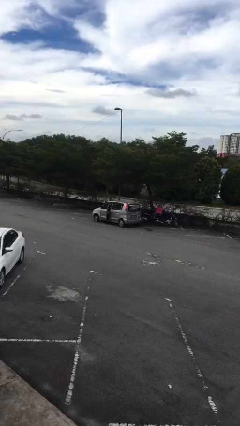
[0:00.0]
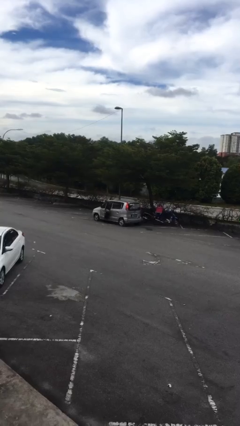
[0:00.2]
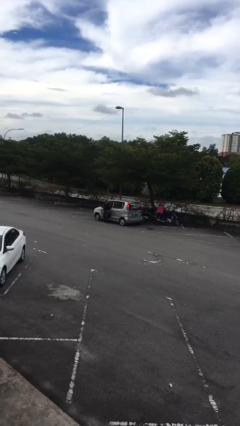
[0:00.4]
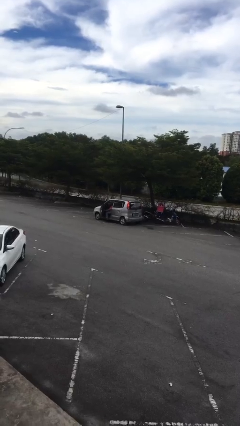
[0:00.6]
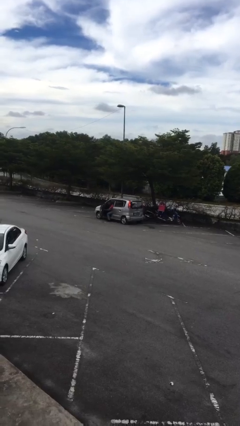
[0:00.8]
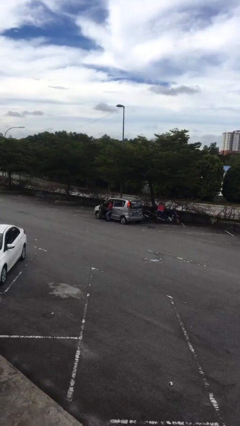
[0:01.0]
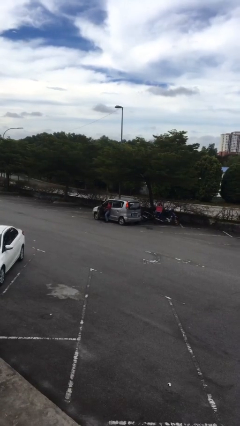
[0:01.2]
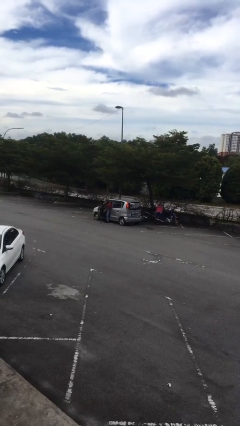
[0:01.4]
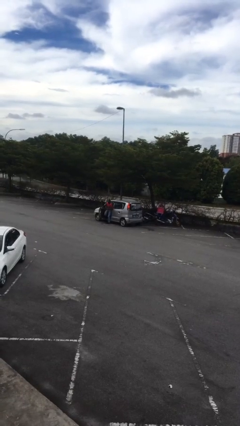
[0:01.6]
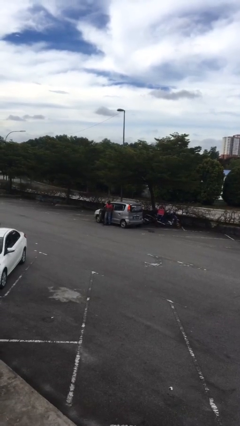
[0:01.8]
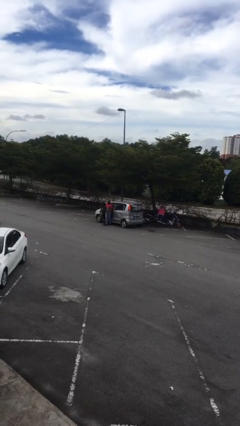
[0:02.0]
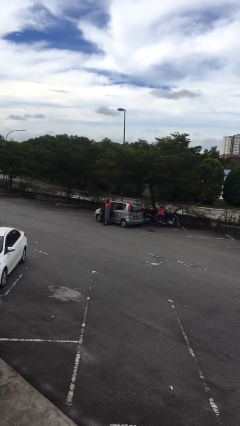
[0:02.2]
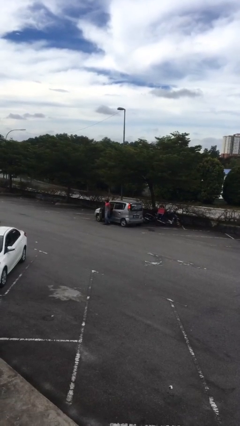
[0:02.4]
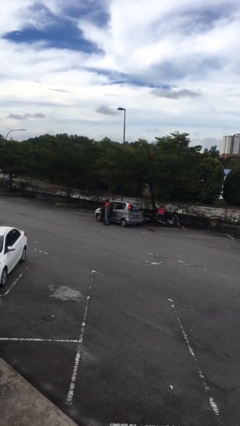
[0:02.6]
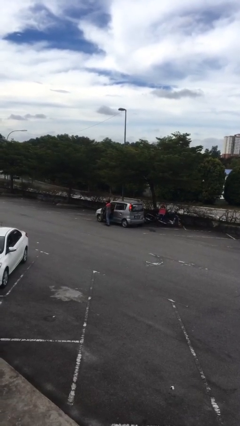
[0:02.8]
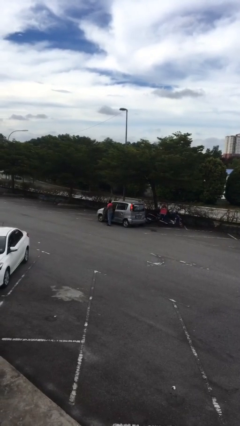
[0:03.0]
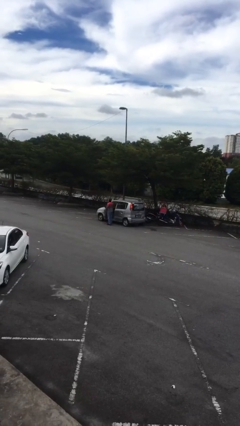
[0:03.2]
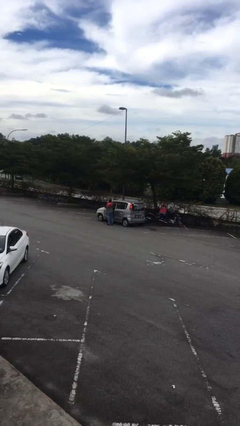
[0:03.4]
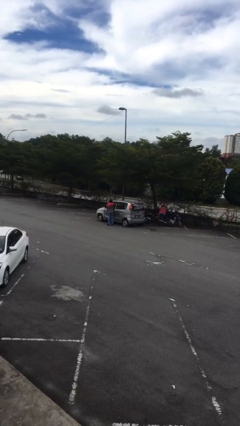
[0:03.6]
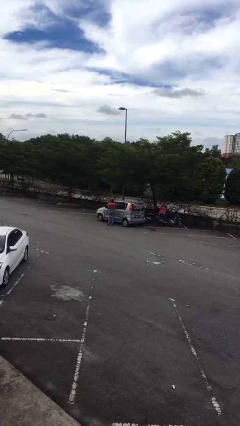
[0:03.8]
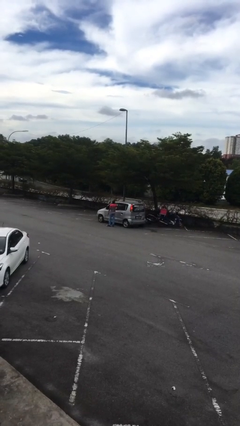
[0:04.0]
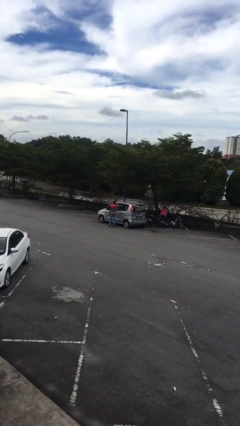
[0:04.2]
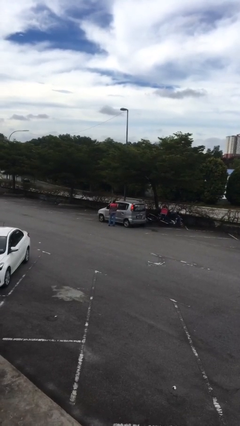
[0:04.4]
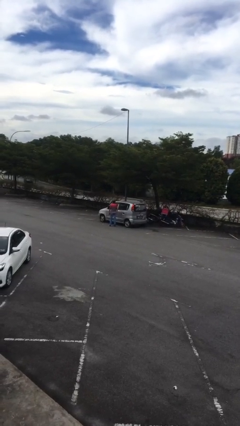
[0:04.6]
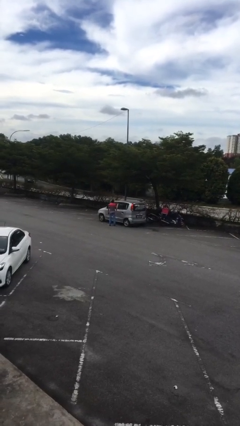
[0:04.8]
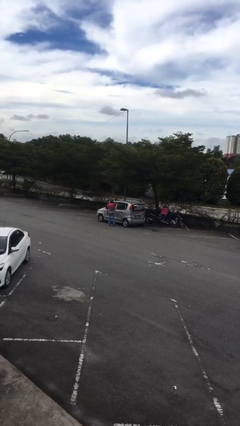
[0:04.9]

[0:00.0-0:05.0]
car drops off person

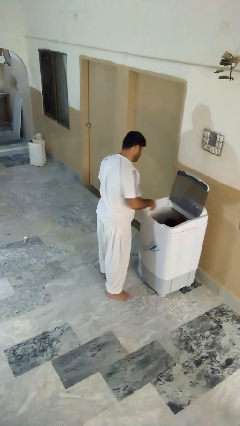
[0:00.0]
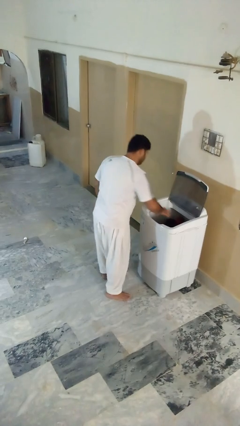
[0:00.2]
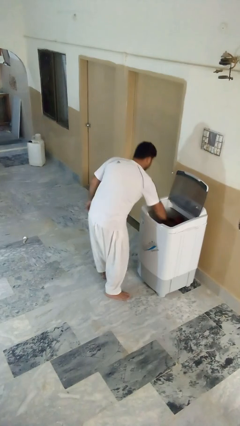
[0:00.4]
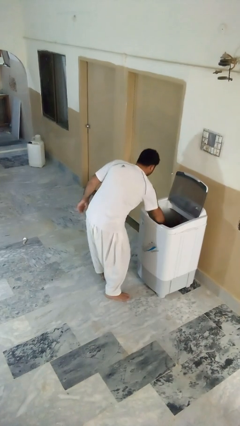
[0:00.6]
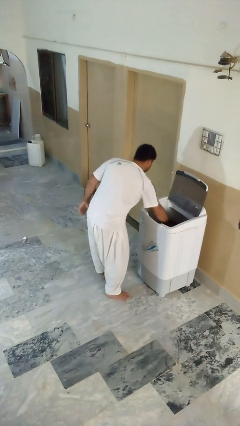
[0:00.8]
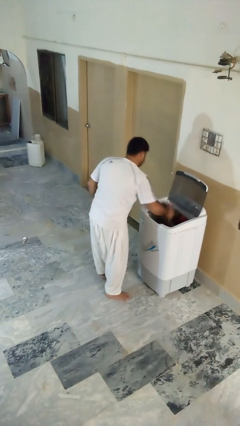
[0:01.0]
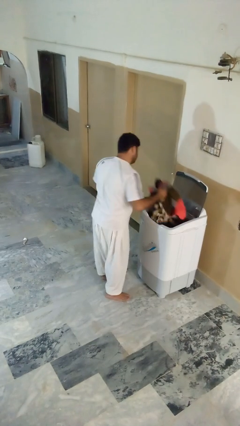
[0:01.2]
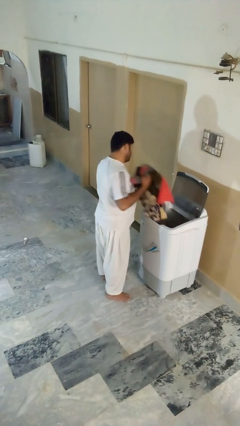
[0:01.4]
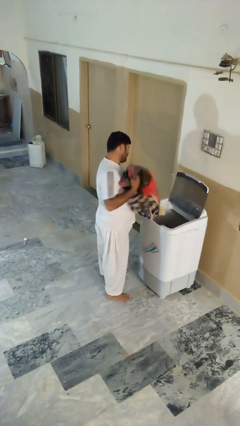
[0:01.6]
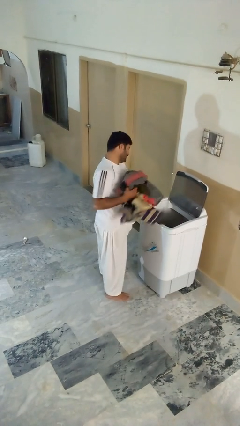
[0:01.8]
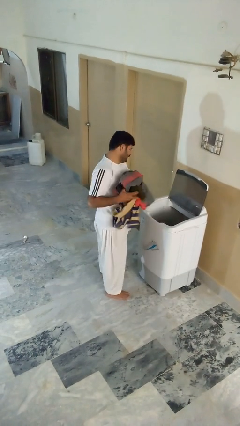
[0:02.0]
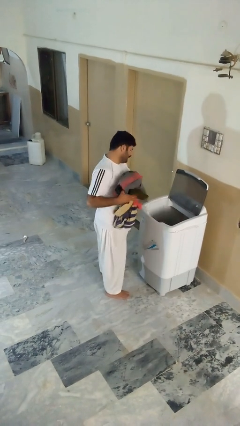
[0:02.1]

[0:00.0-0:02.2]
person unloads clotheswasher

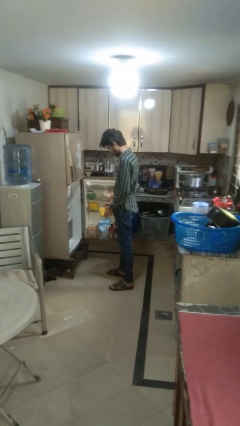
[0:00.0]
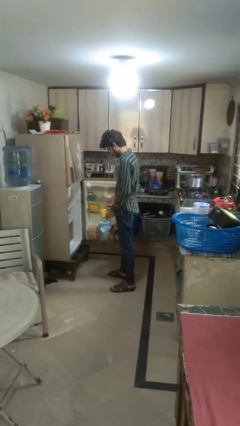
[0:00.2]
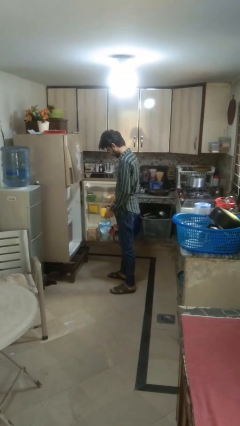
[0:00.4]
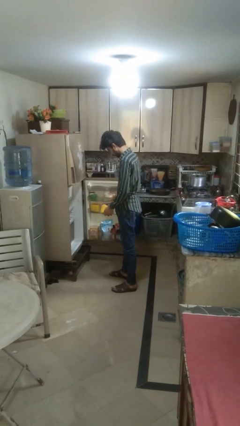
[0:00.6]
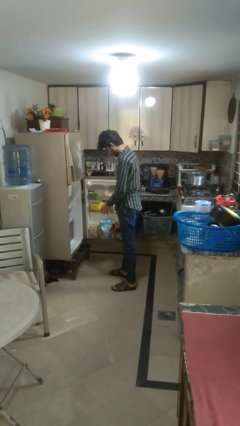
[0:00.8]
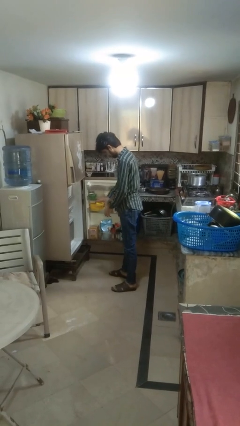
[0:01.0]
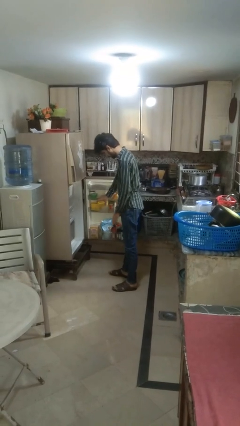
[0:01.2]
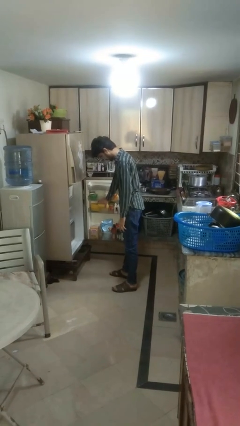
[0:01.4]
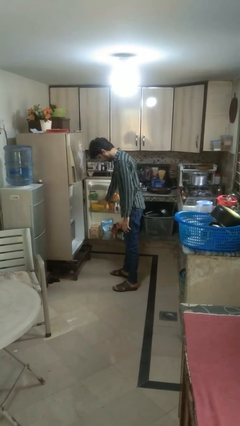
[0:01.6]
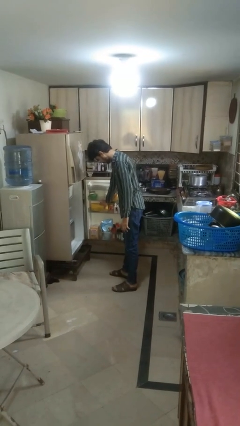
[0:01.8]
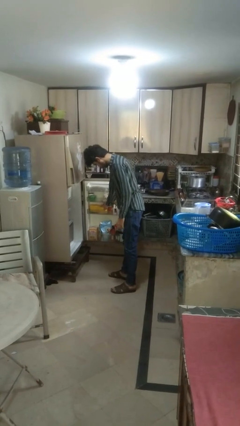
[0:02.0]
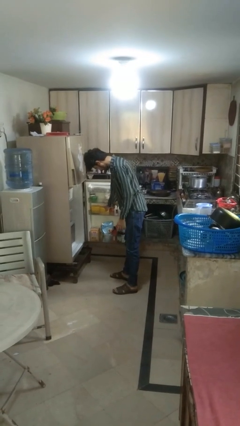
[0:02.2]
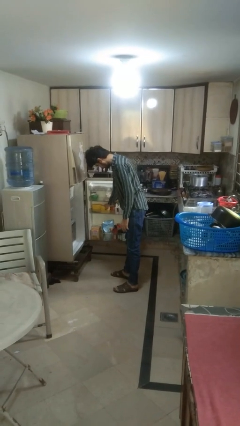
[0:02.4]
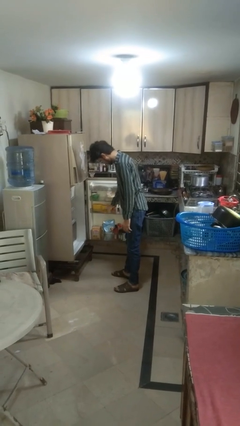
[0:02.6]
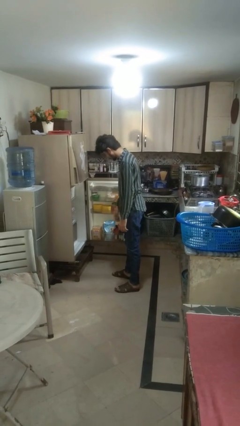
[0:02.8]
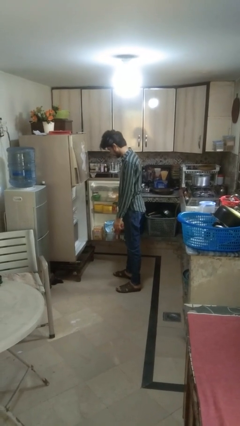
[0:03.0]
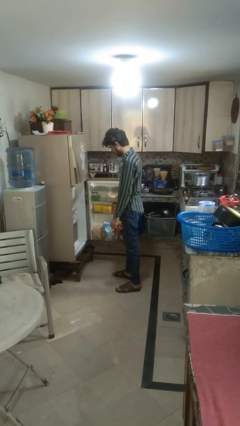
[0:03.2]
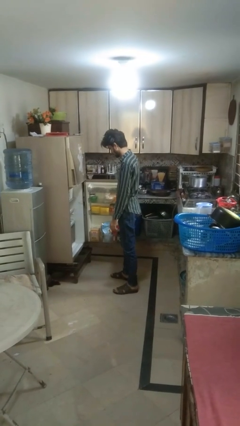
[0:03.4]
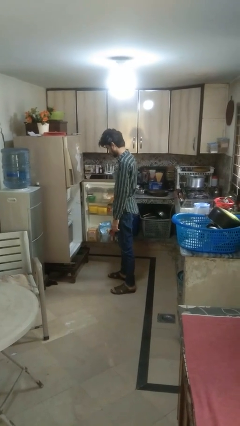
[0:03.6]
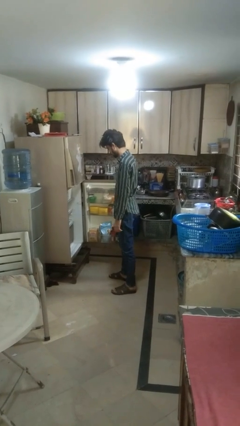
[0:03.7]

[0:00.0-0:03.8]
person puts object into refrigerator

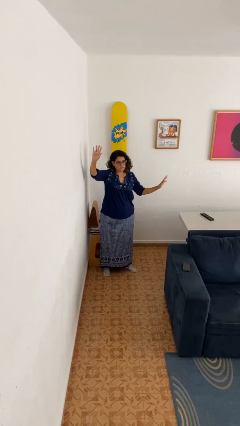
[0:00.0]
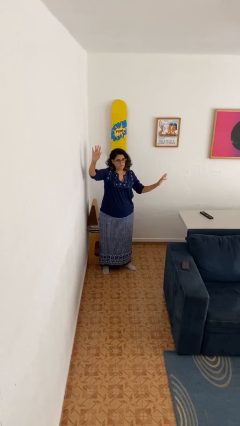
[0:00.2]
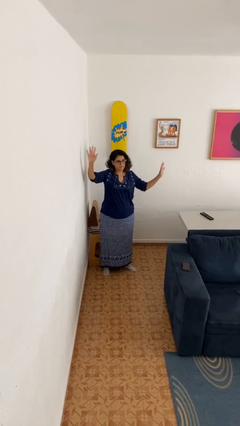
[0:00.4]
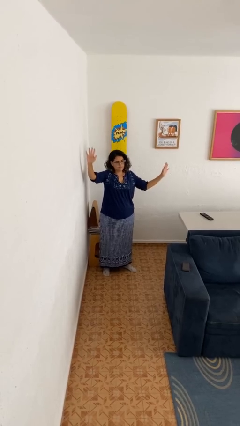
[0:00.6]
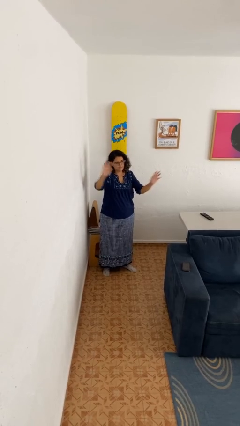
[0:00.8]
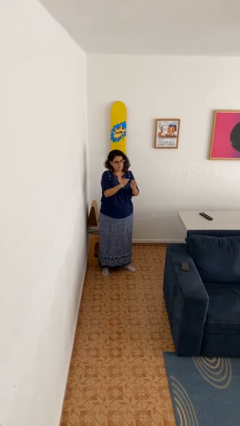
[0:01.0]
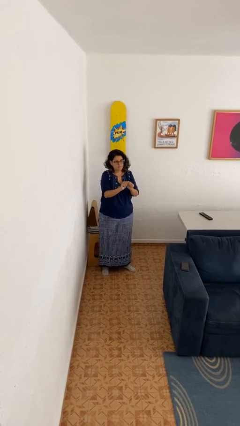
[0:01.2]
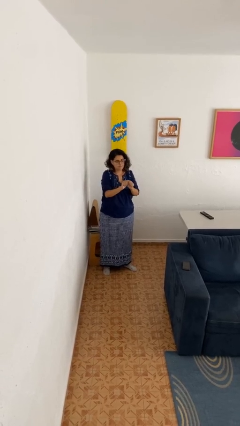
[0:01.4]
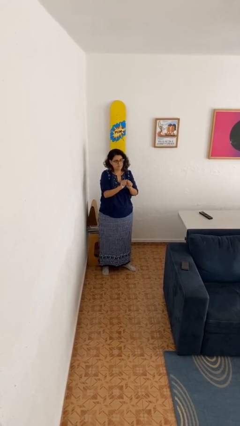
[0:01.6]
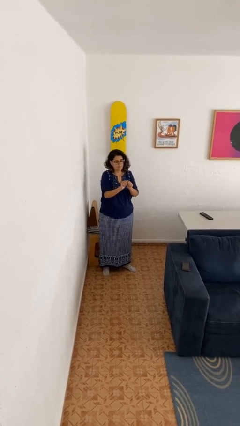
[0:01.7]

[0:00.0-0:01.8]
person gestures zoom out

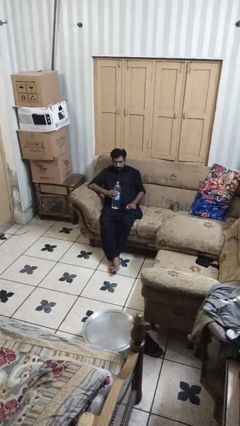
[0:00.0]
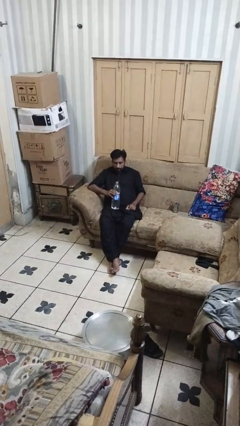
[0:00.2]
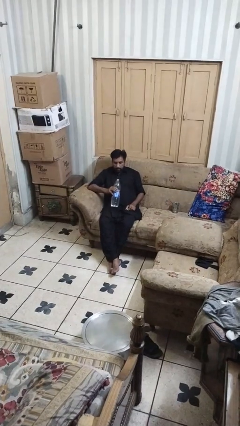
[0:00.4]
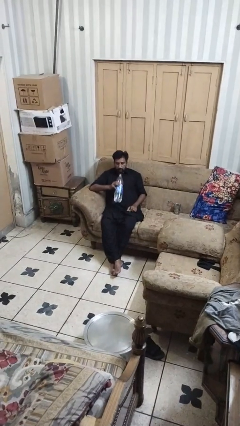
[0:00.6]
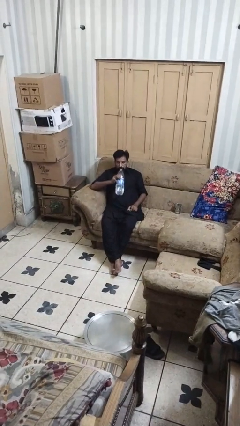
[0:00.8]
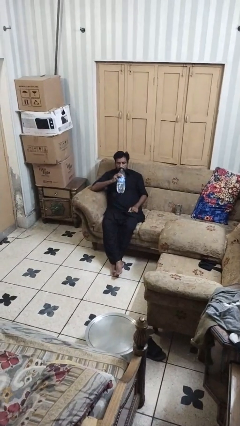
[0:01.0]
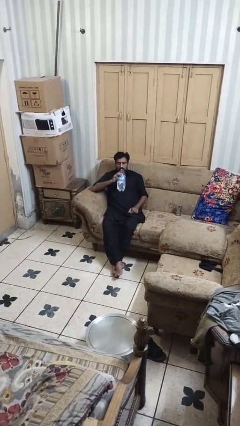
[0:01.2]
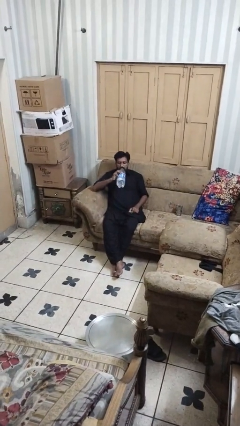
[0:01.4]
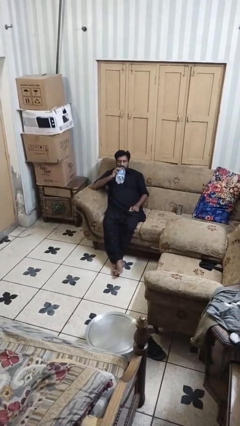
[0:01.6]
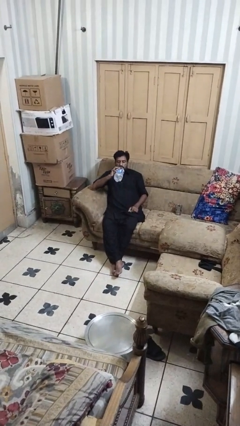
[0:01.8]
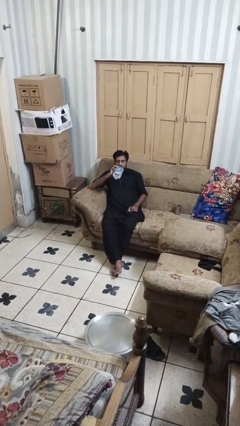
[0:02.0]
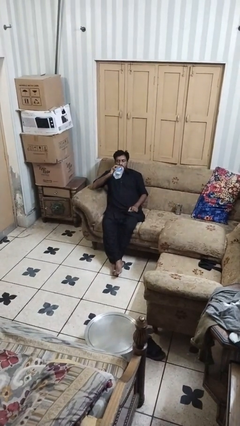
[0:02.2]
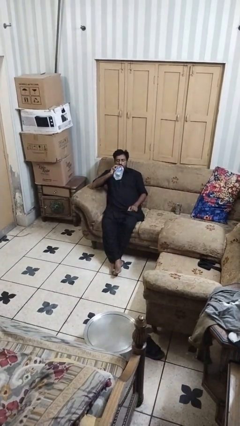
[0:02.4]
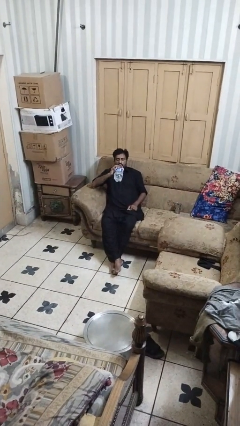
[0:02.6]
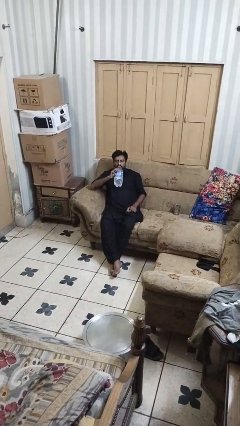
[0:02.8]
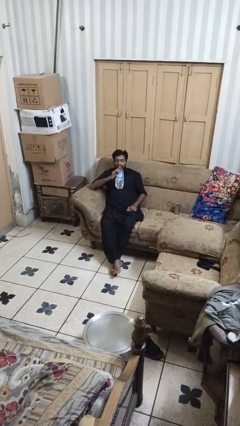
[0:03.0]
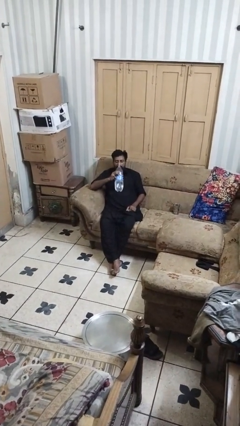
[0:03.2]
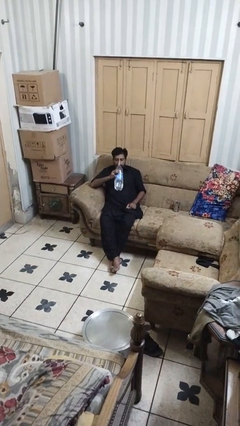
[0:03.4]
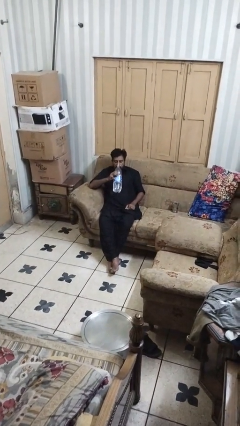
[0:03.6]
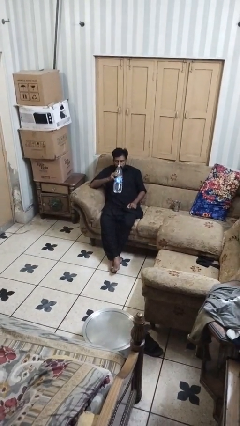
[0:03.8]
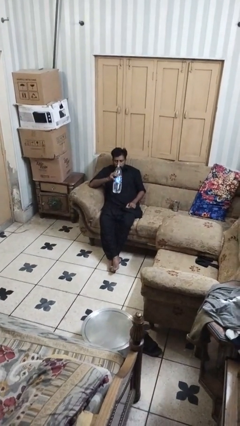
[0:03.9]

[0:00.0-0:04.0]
person drinks from bottle

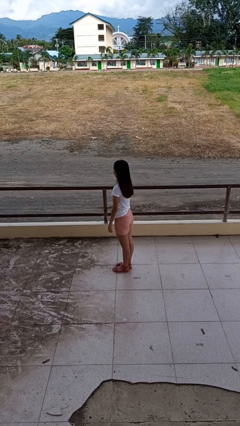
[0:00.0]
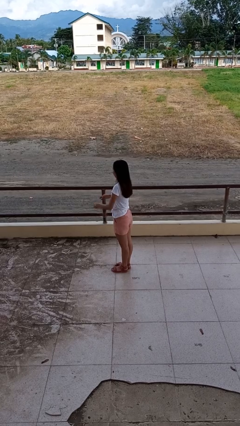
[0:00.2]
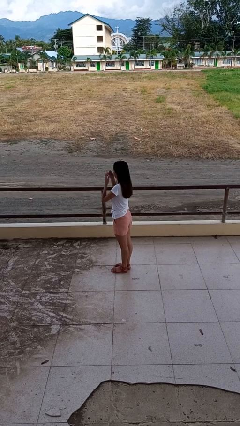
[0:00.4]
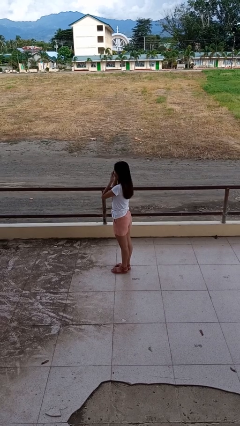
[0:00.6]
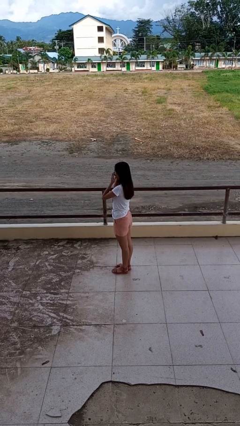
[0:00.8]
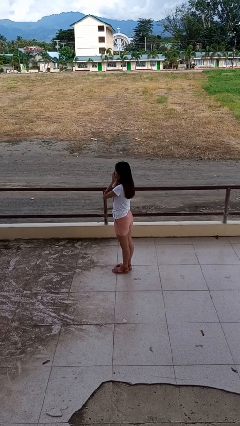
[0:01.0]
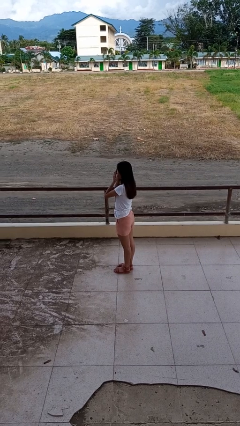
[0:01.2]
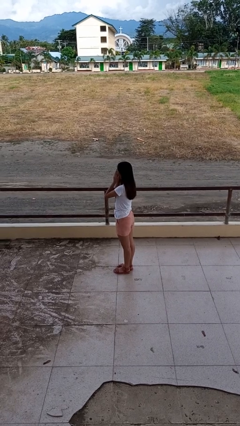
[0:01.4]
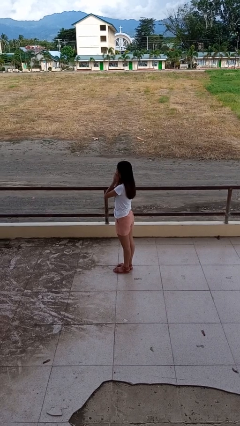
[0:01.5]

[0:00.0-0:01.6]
person rubs eyes
